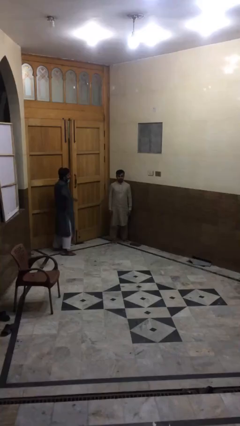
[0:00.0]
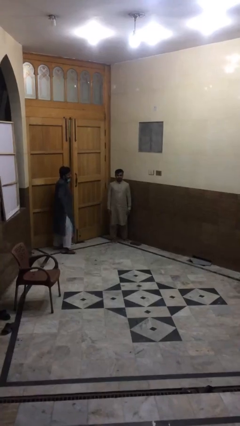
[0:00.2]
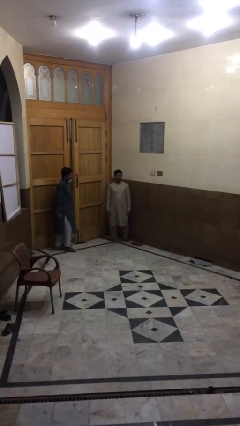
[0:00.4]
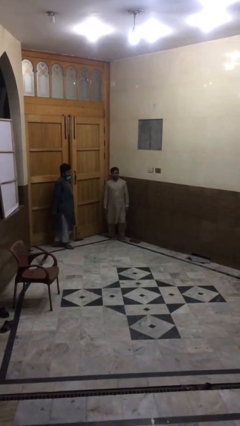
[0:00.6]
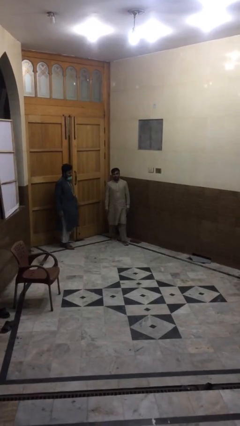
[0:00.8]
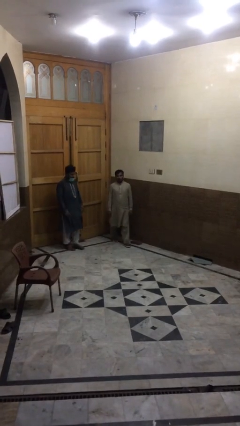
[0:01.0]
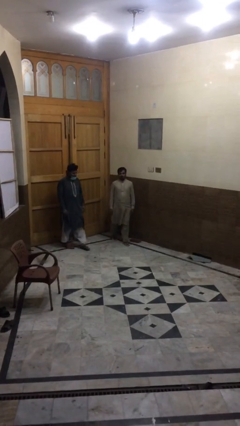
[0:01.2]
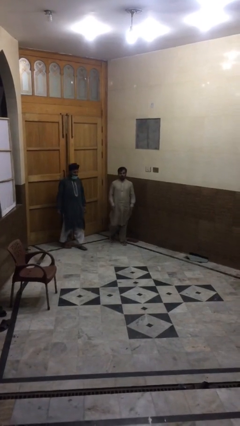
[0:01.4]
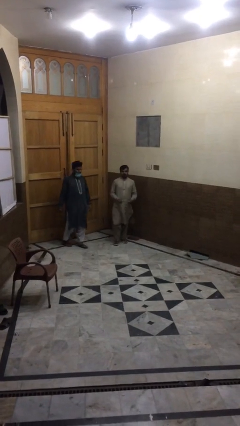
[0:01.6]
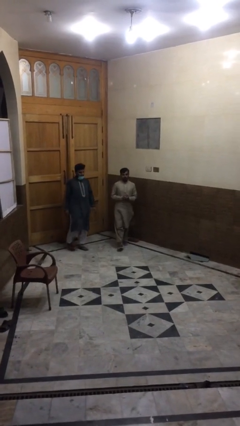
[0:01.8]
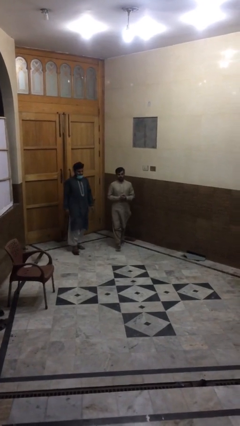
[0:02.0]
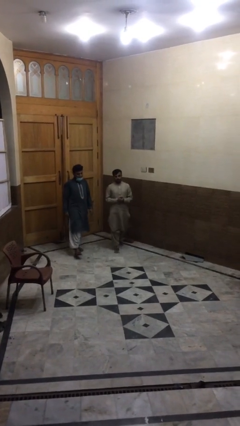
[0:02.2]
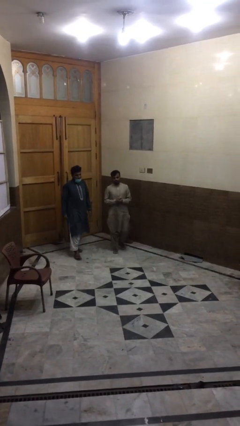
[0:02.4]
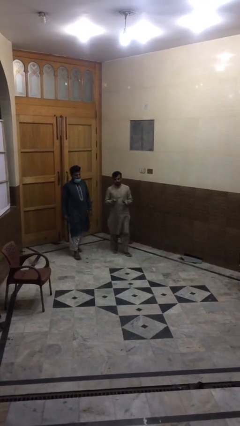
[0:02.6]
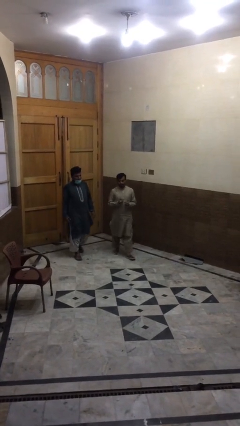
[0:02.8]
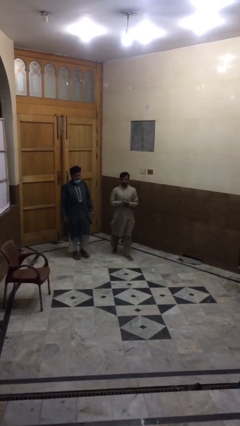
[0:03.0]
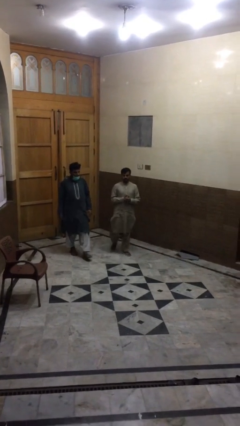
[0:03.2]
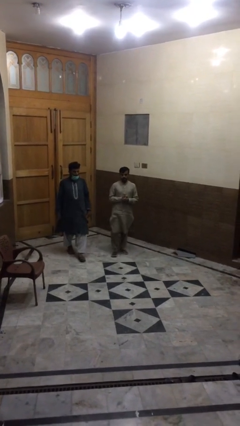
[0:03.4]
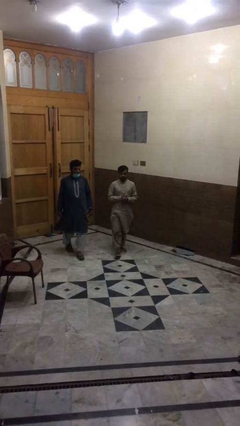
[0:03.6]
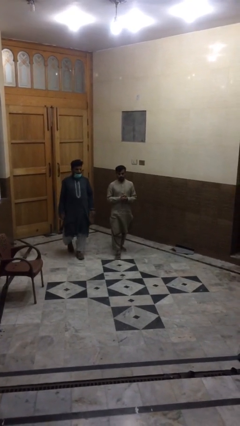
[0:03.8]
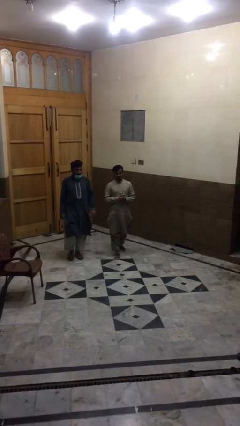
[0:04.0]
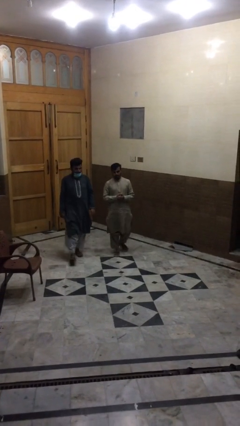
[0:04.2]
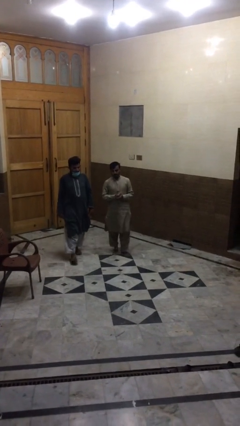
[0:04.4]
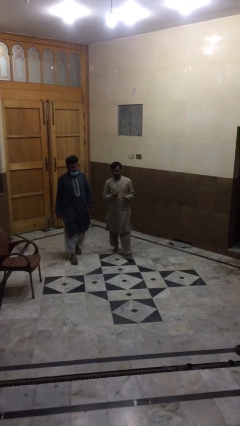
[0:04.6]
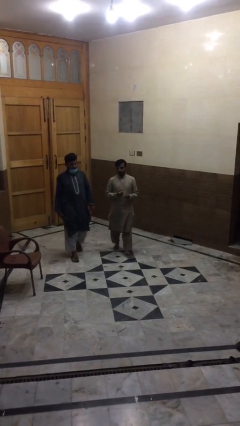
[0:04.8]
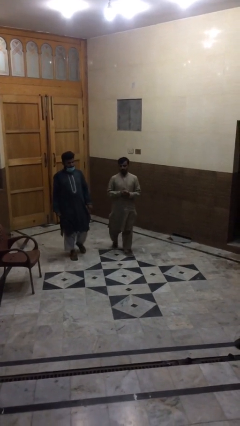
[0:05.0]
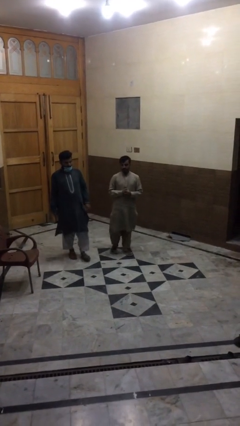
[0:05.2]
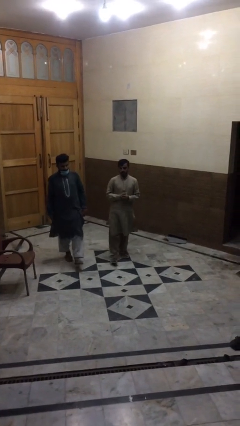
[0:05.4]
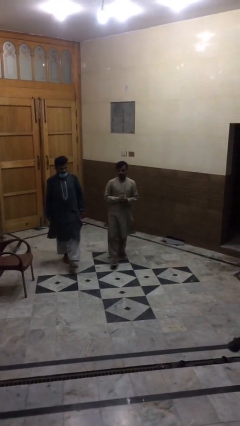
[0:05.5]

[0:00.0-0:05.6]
person talks to person

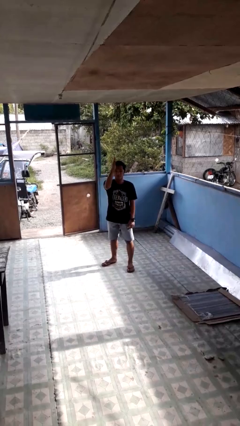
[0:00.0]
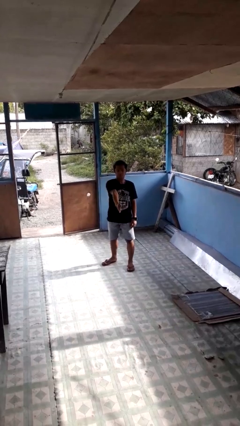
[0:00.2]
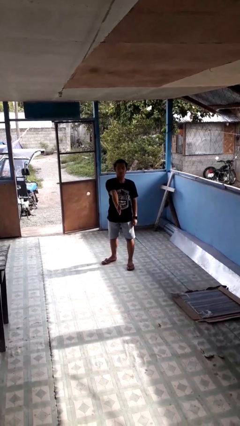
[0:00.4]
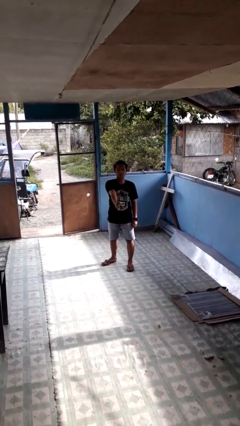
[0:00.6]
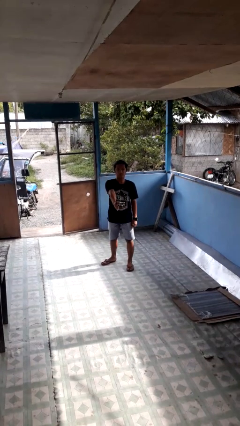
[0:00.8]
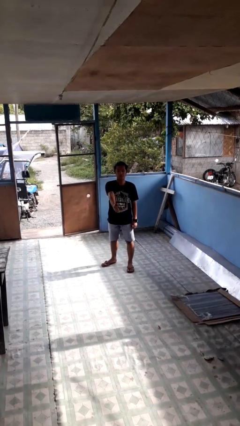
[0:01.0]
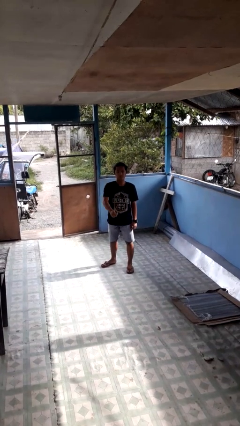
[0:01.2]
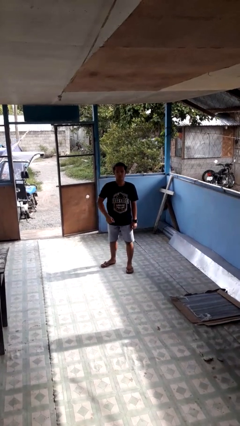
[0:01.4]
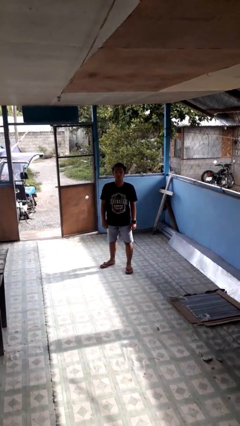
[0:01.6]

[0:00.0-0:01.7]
person karate chop

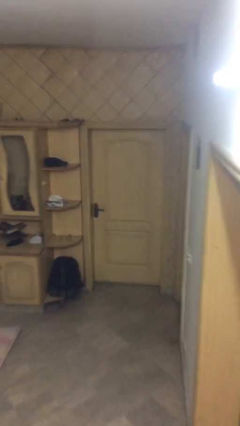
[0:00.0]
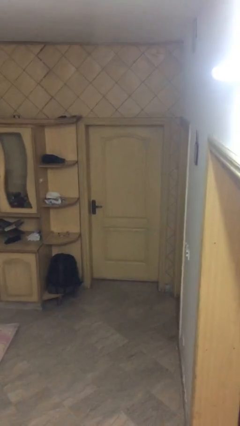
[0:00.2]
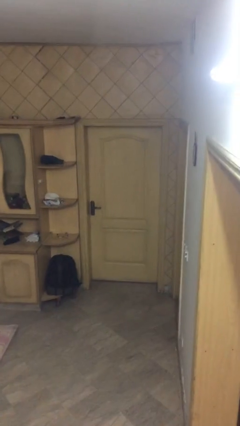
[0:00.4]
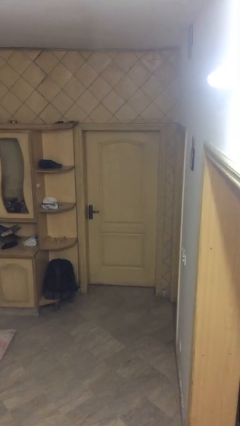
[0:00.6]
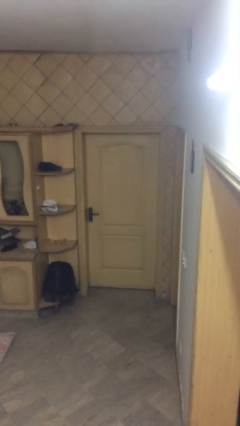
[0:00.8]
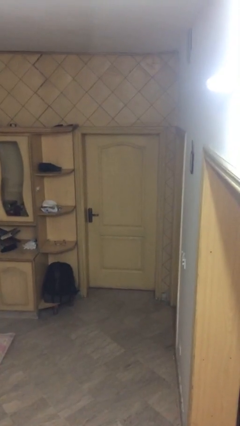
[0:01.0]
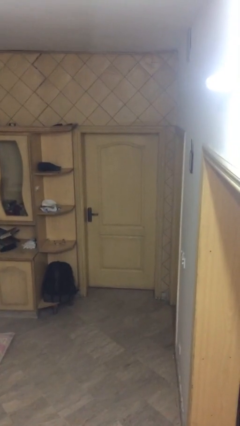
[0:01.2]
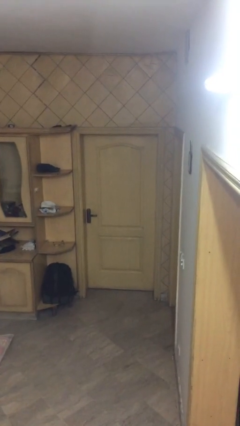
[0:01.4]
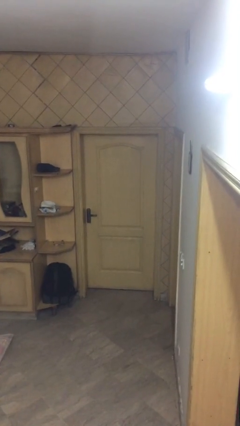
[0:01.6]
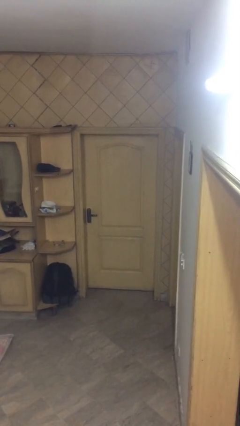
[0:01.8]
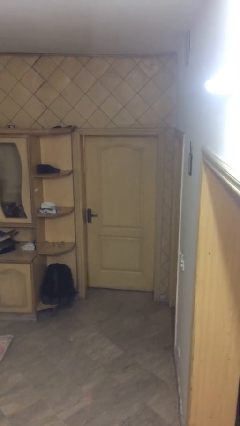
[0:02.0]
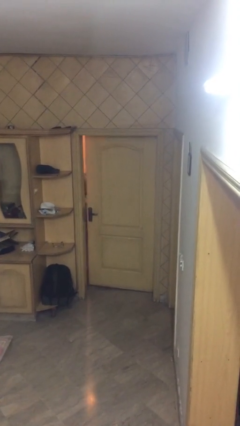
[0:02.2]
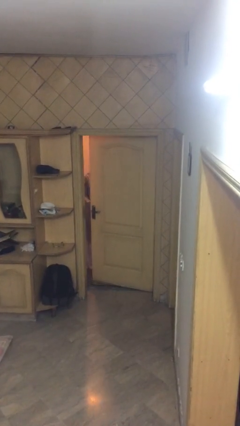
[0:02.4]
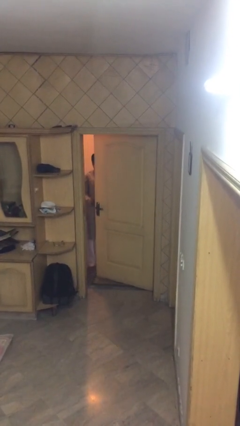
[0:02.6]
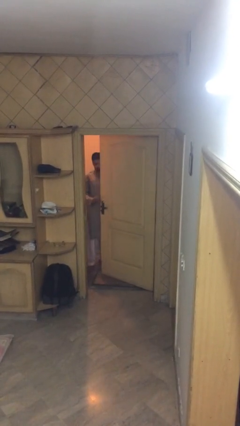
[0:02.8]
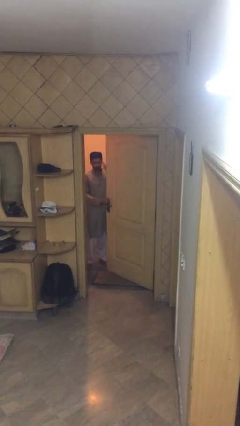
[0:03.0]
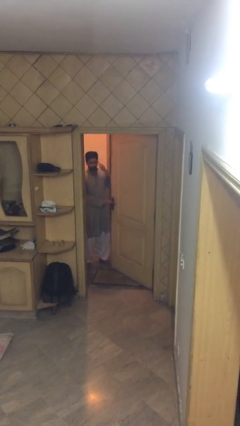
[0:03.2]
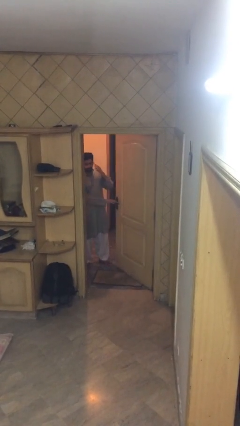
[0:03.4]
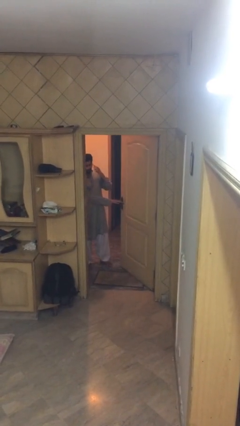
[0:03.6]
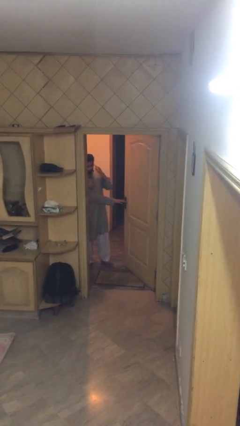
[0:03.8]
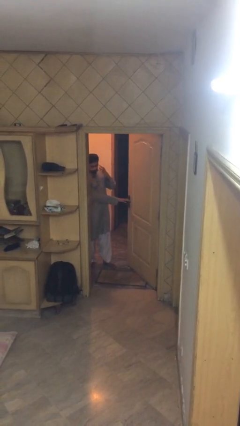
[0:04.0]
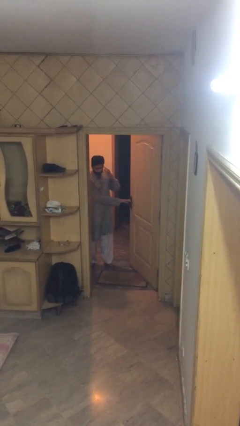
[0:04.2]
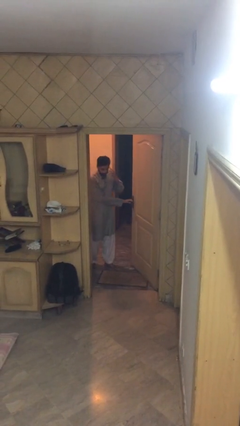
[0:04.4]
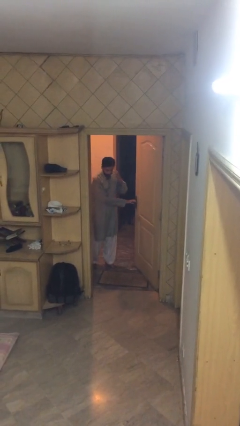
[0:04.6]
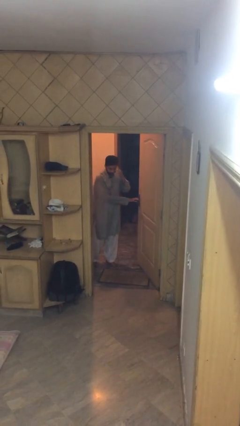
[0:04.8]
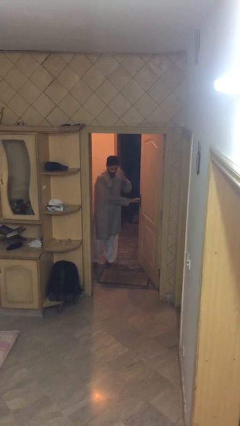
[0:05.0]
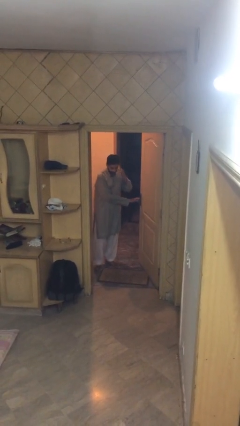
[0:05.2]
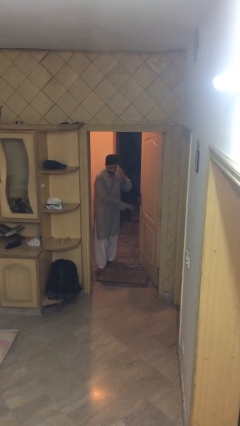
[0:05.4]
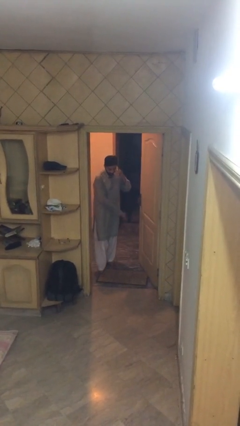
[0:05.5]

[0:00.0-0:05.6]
person opens facility door

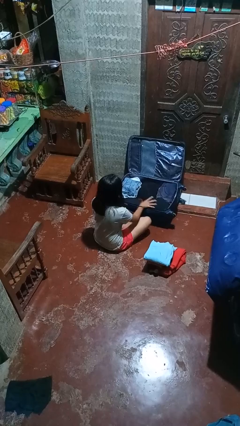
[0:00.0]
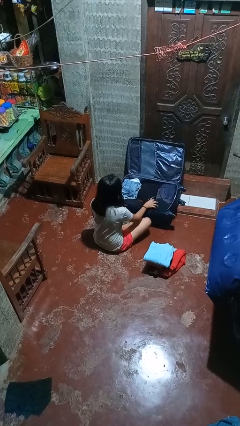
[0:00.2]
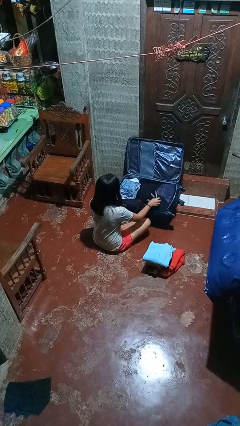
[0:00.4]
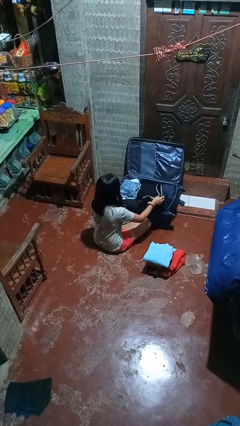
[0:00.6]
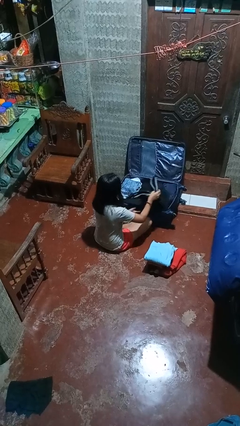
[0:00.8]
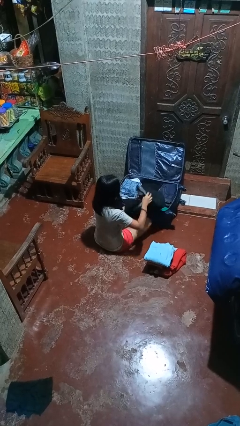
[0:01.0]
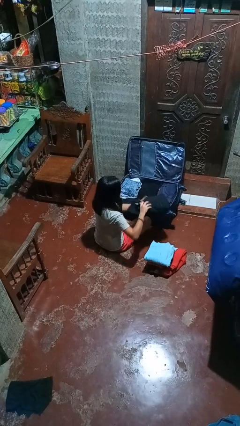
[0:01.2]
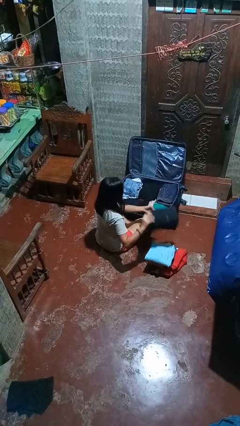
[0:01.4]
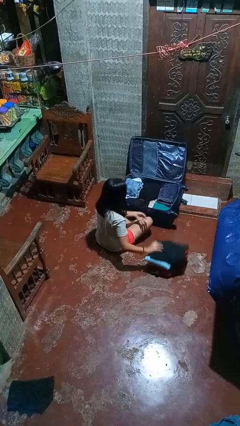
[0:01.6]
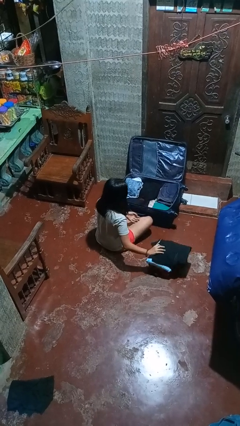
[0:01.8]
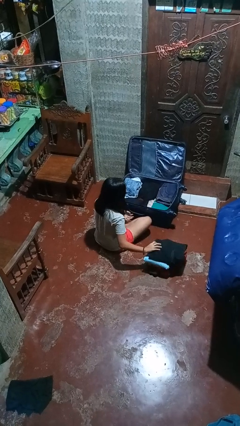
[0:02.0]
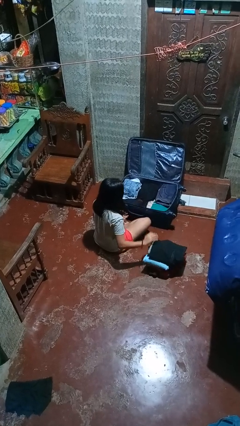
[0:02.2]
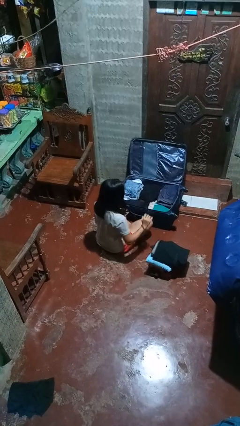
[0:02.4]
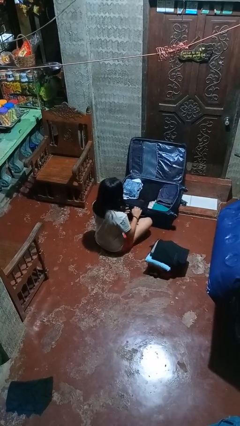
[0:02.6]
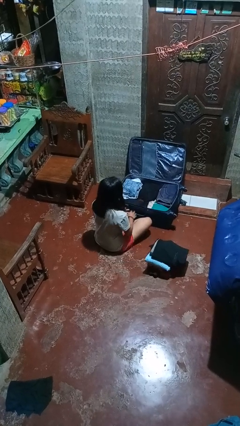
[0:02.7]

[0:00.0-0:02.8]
person unloads clothes from suitcase

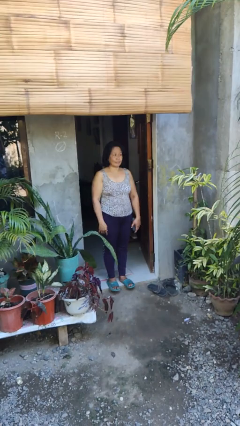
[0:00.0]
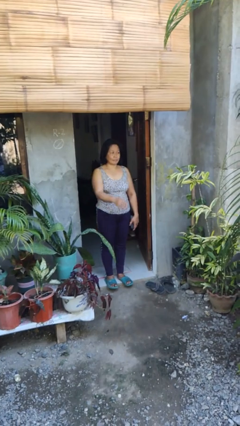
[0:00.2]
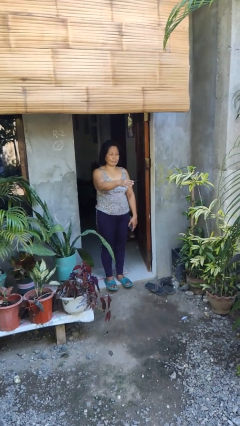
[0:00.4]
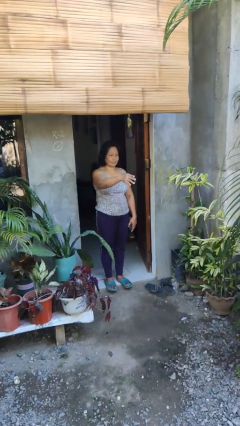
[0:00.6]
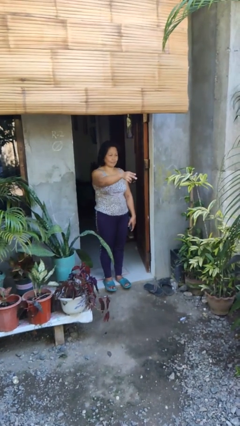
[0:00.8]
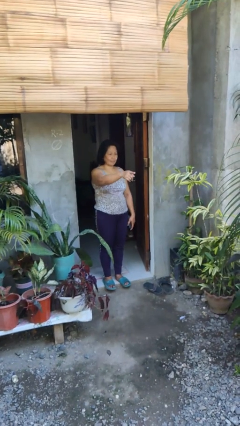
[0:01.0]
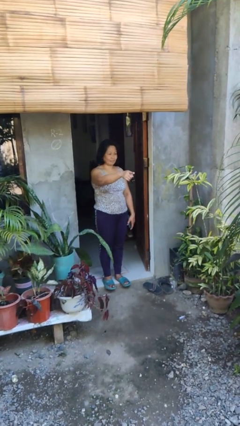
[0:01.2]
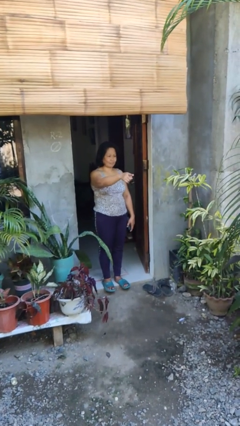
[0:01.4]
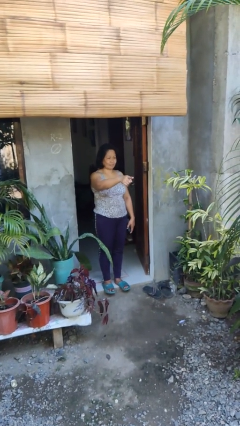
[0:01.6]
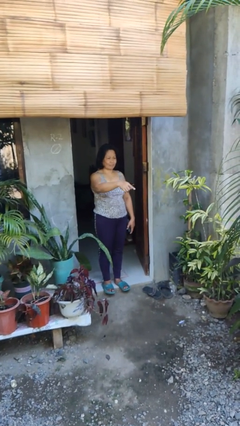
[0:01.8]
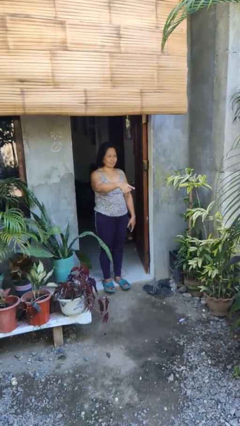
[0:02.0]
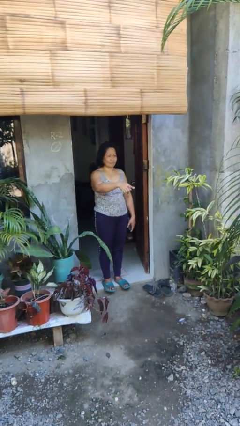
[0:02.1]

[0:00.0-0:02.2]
person points at person
